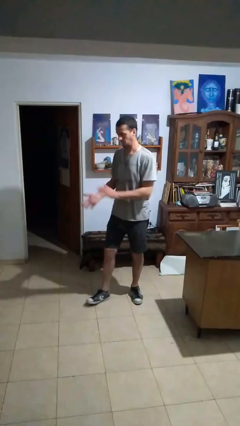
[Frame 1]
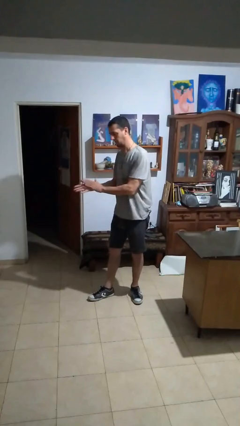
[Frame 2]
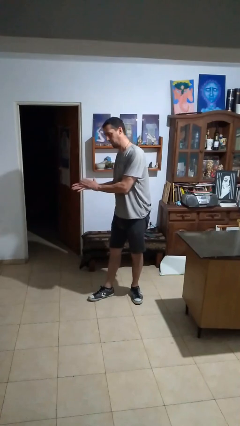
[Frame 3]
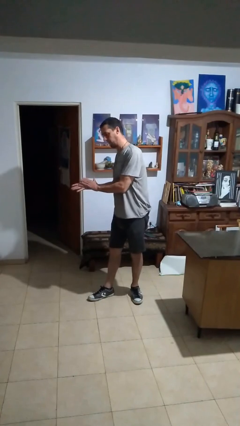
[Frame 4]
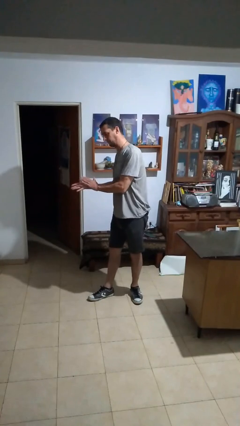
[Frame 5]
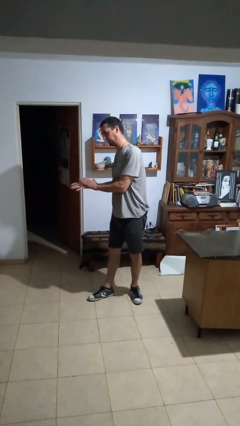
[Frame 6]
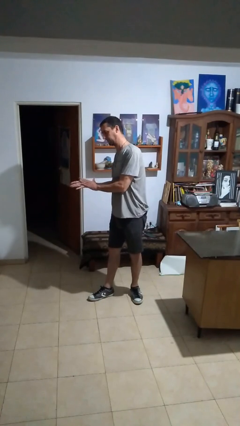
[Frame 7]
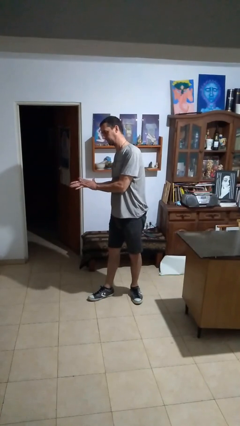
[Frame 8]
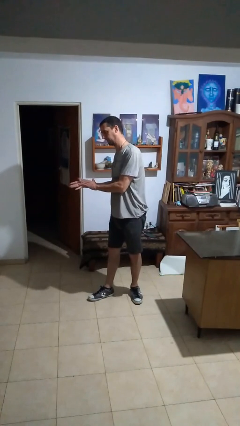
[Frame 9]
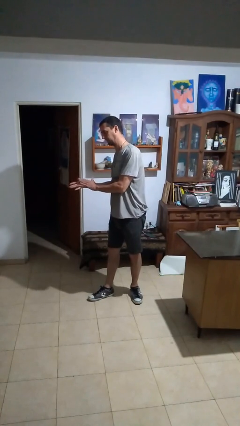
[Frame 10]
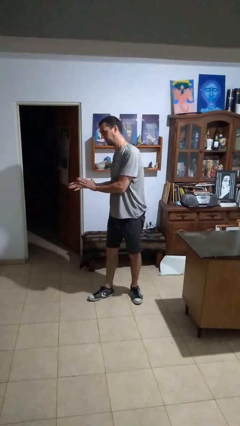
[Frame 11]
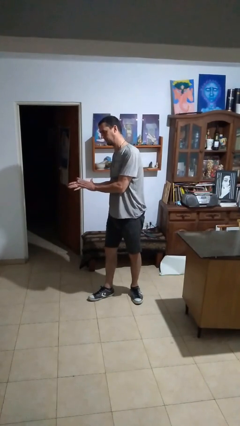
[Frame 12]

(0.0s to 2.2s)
person claps hands

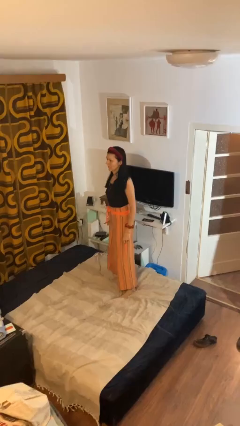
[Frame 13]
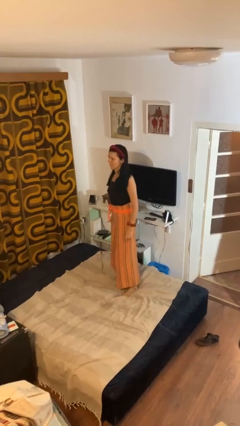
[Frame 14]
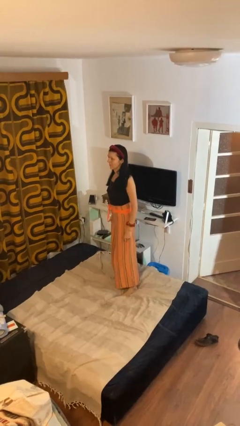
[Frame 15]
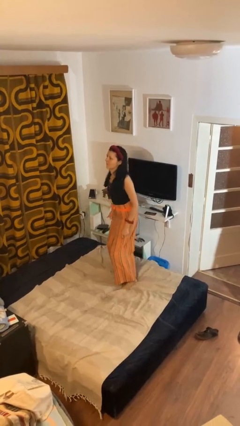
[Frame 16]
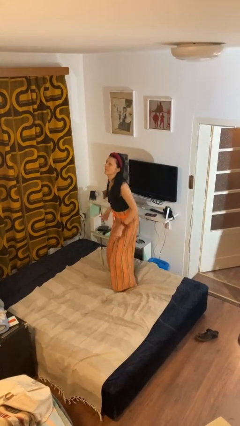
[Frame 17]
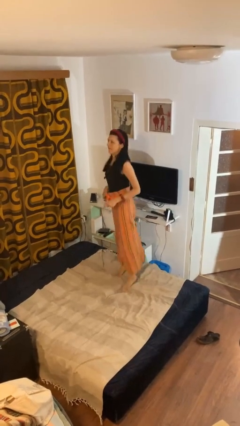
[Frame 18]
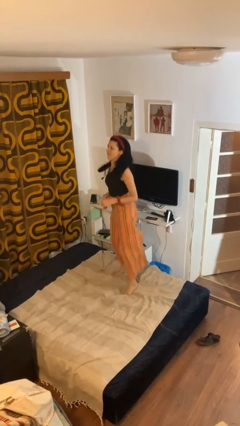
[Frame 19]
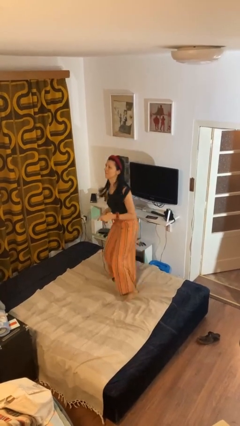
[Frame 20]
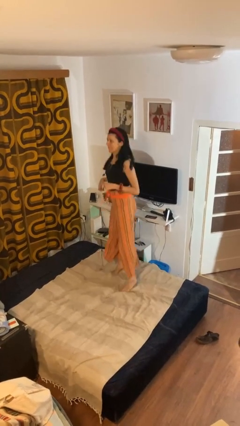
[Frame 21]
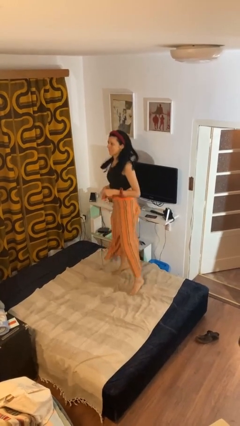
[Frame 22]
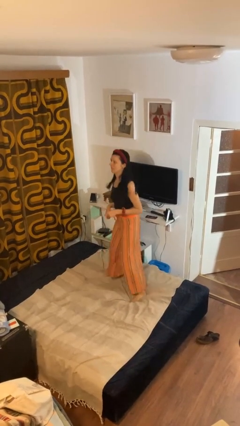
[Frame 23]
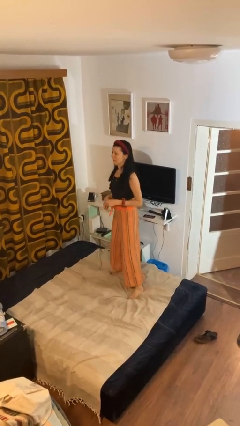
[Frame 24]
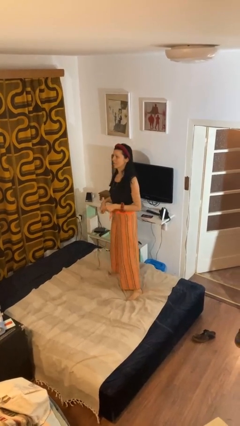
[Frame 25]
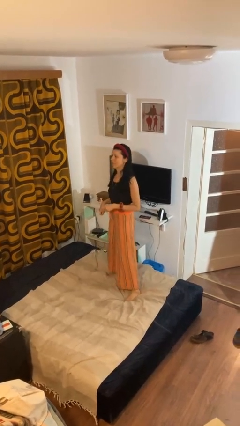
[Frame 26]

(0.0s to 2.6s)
person jumps on bed

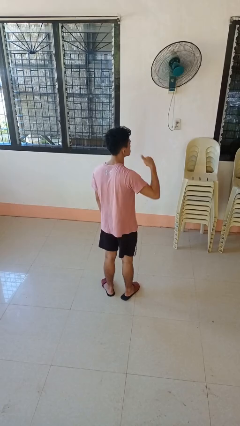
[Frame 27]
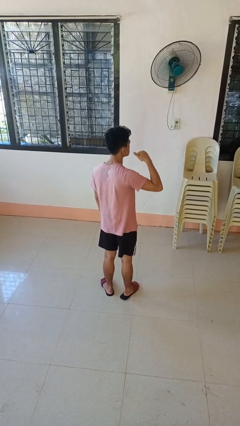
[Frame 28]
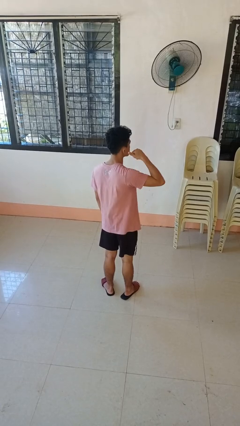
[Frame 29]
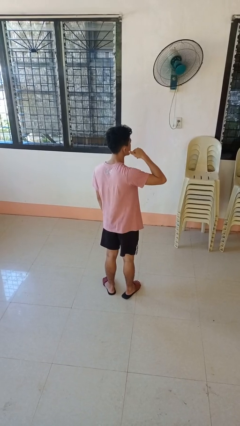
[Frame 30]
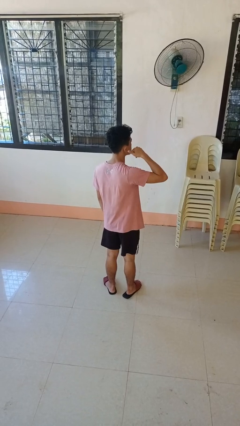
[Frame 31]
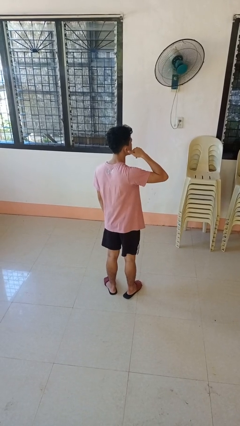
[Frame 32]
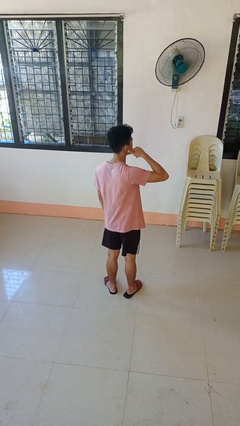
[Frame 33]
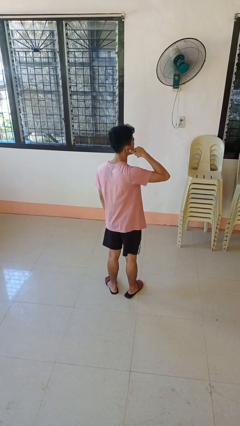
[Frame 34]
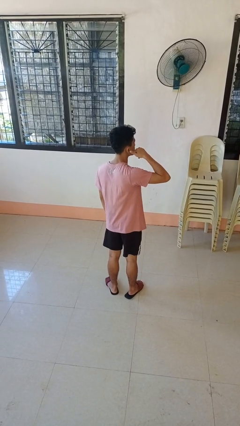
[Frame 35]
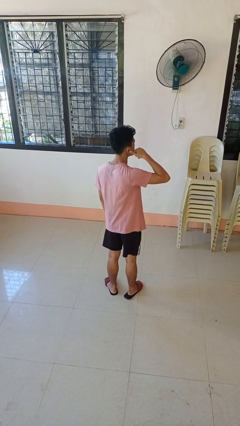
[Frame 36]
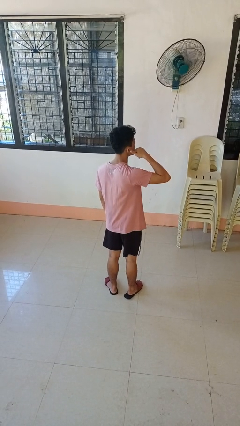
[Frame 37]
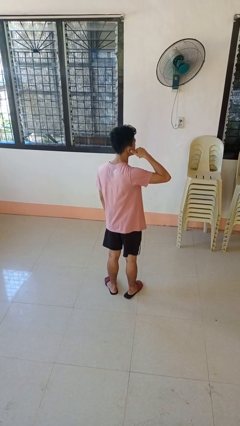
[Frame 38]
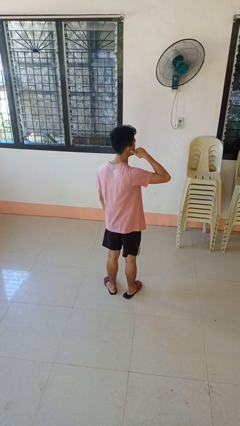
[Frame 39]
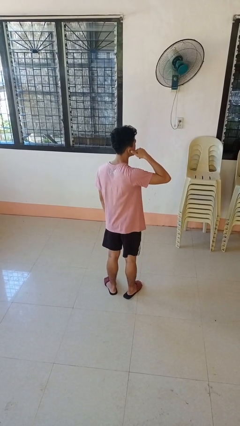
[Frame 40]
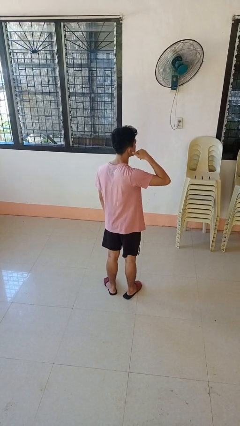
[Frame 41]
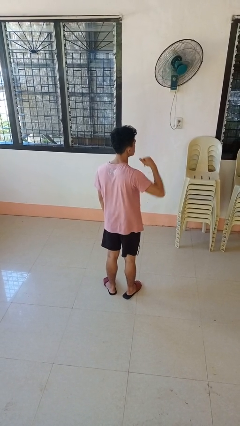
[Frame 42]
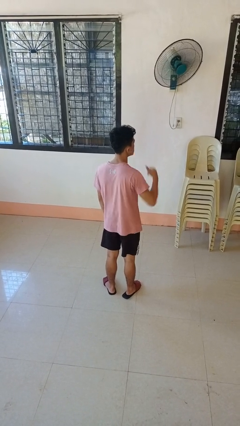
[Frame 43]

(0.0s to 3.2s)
person gestures call me

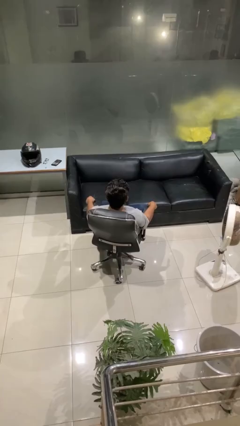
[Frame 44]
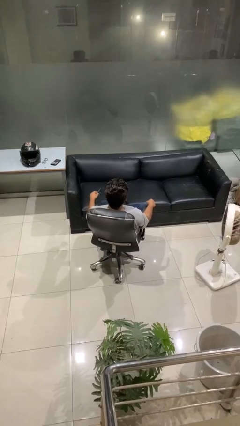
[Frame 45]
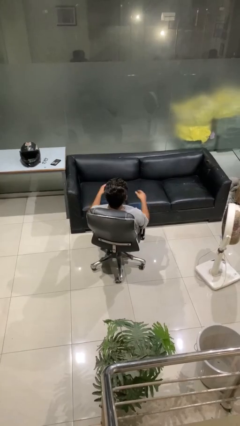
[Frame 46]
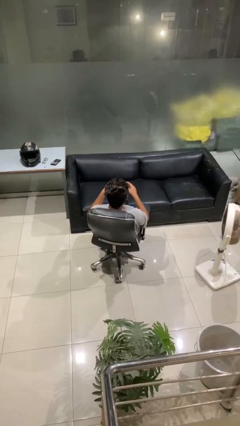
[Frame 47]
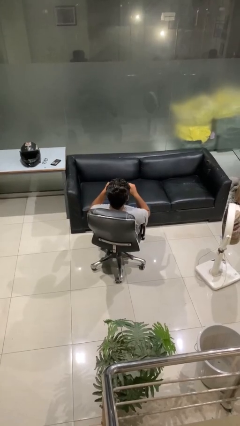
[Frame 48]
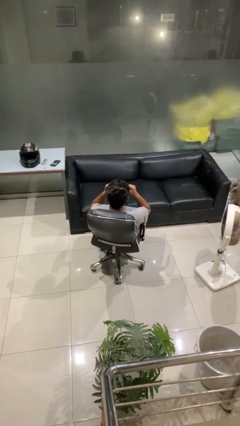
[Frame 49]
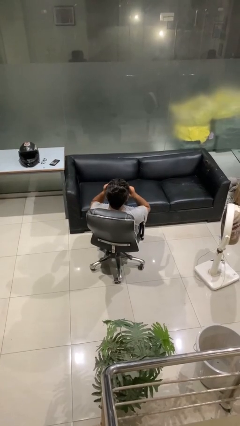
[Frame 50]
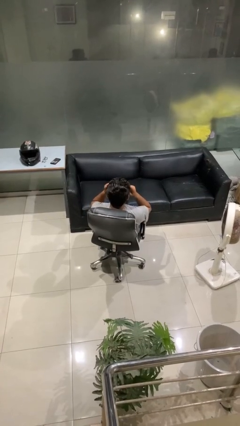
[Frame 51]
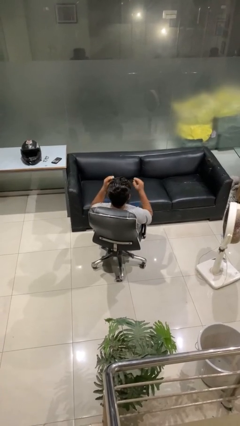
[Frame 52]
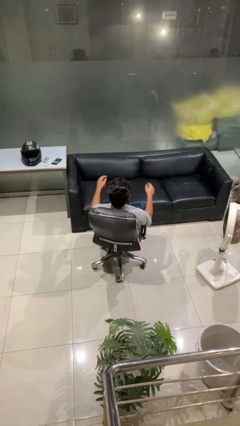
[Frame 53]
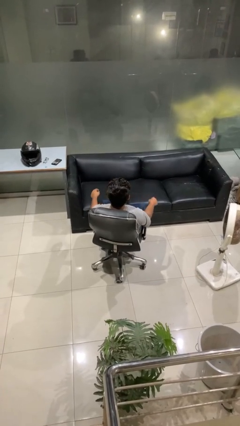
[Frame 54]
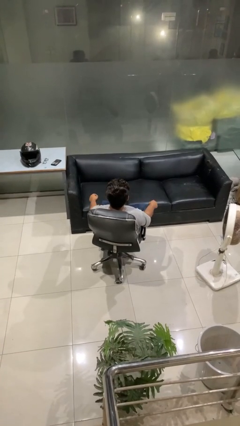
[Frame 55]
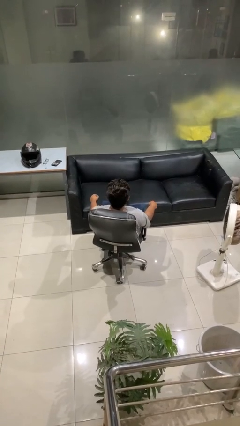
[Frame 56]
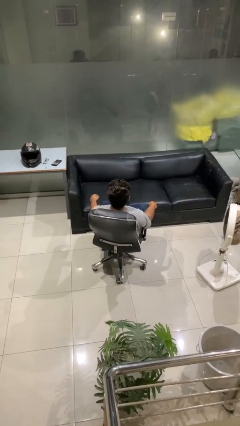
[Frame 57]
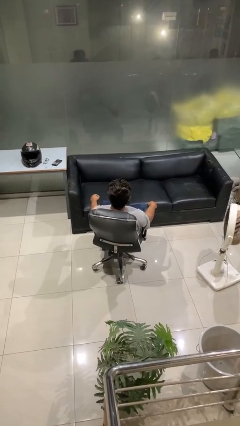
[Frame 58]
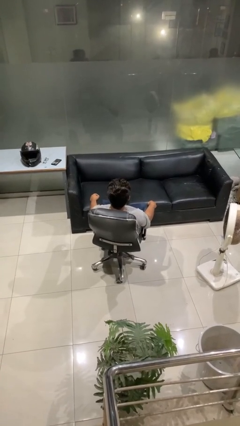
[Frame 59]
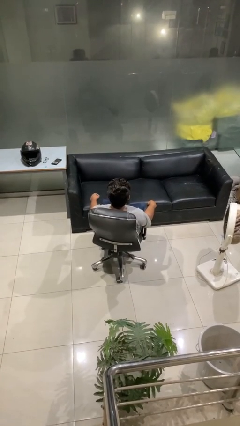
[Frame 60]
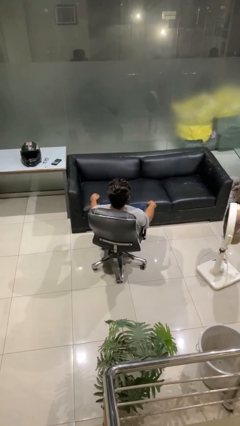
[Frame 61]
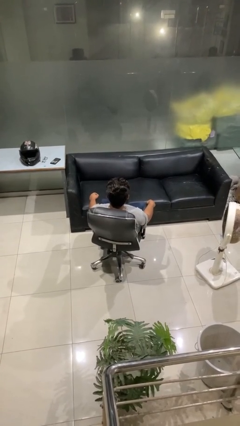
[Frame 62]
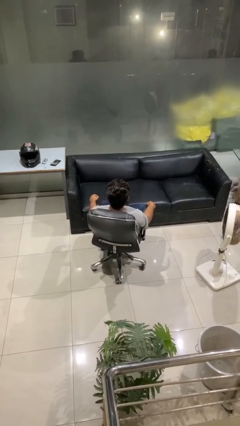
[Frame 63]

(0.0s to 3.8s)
person puts on sunglasses

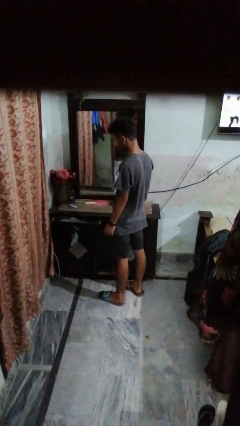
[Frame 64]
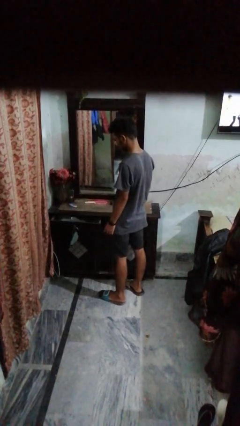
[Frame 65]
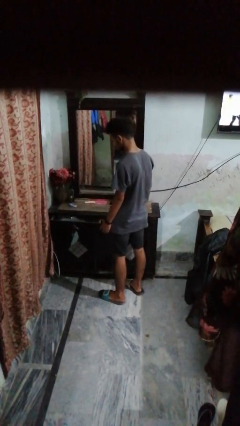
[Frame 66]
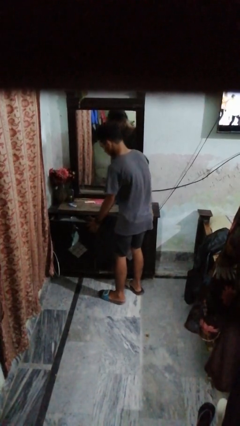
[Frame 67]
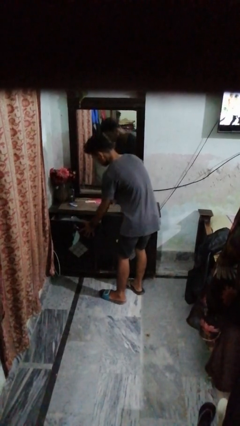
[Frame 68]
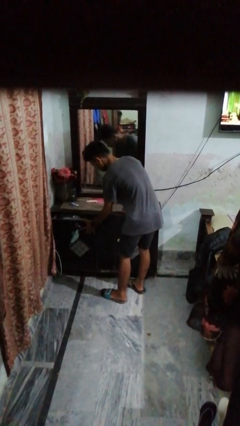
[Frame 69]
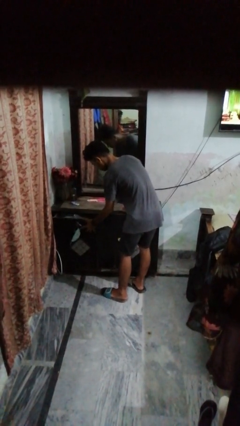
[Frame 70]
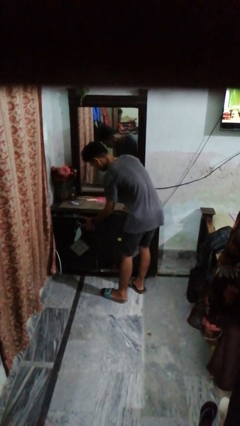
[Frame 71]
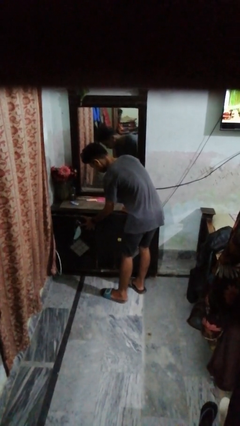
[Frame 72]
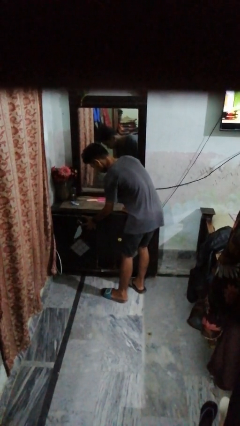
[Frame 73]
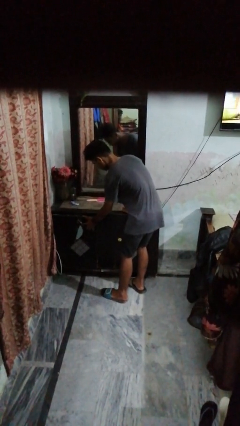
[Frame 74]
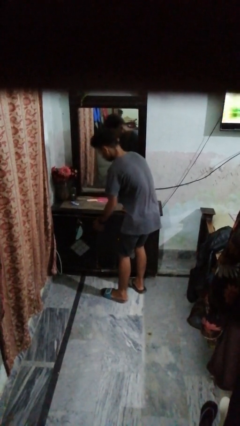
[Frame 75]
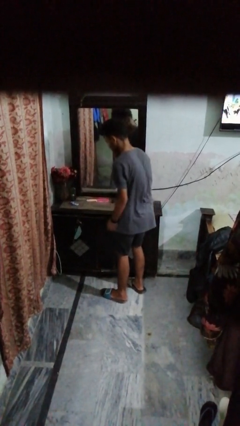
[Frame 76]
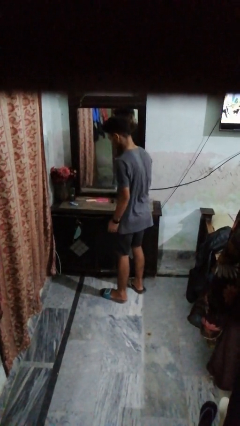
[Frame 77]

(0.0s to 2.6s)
person closes dresser drawer

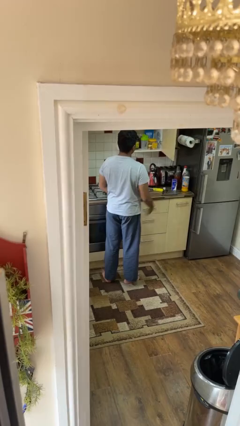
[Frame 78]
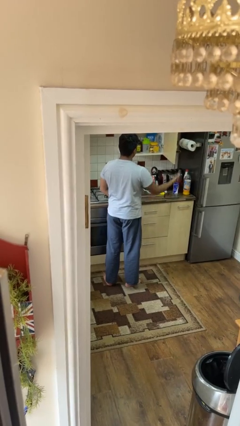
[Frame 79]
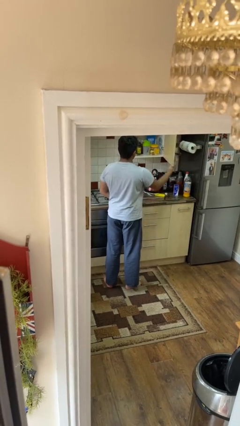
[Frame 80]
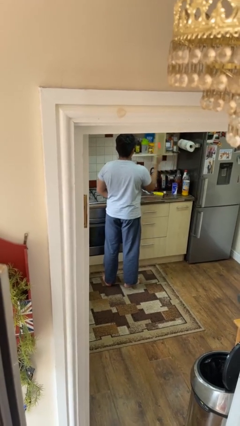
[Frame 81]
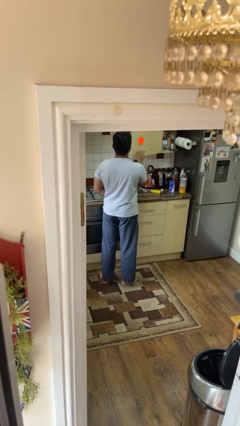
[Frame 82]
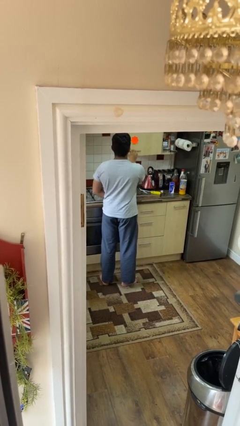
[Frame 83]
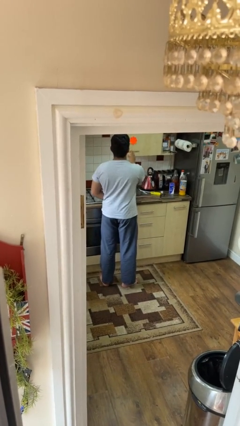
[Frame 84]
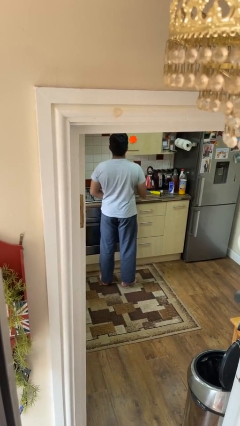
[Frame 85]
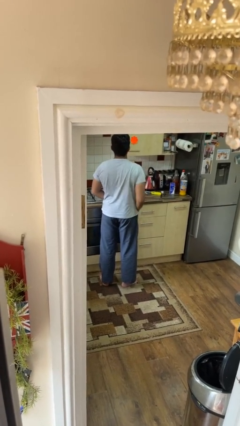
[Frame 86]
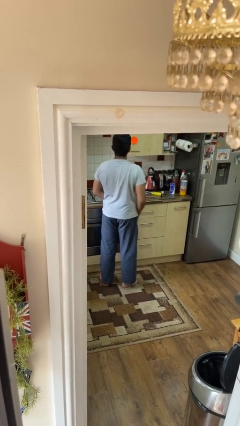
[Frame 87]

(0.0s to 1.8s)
person closes cabinet

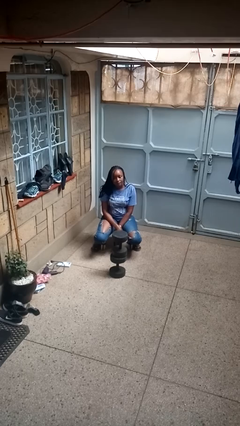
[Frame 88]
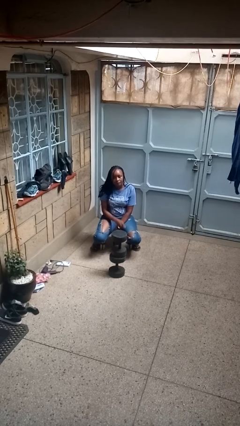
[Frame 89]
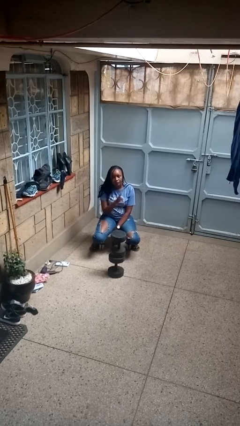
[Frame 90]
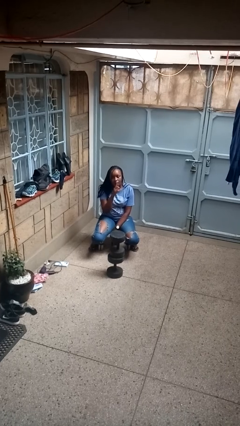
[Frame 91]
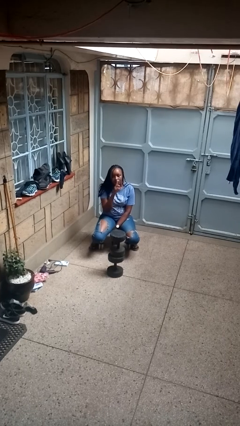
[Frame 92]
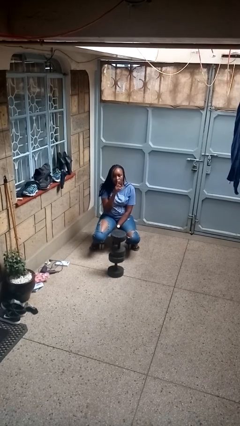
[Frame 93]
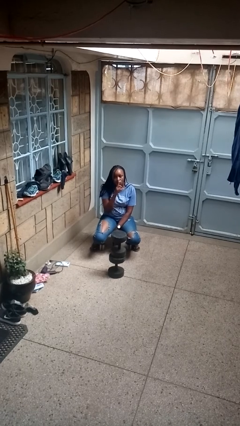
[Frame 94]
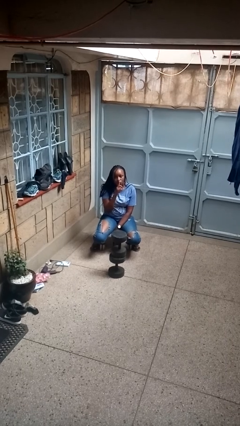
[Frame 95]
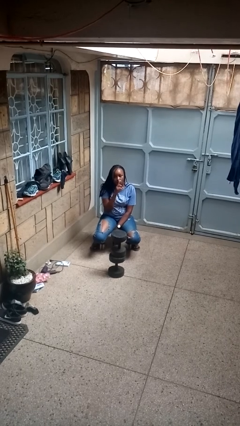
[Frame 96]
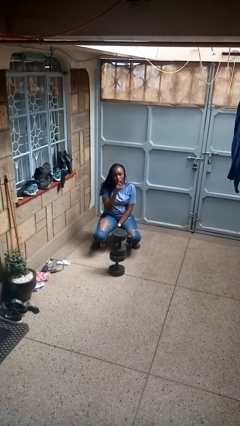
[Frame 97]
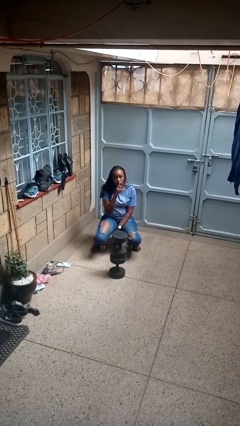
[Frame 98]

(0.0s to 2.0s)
person gestures be quiet
